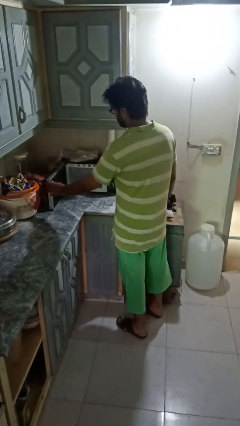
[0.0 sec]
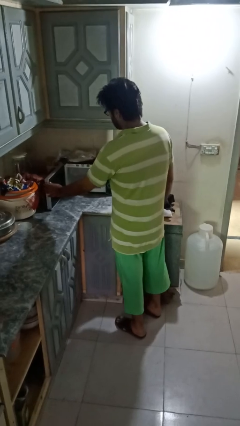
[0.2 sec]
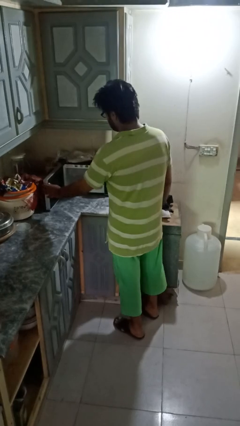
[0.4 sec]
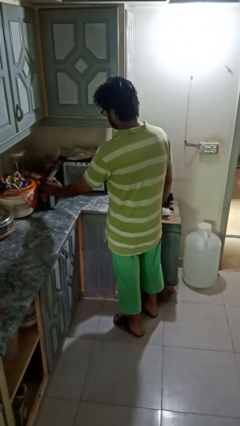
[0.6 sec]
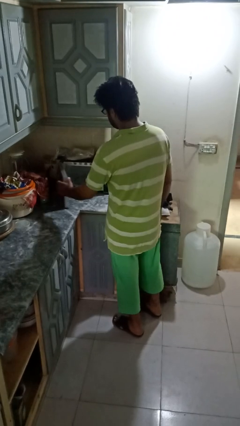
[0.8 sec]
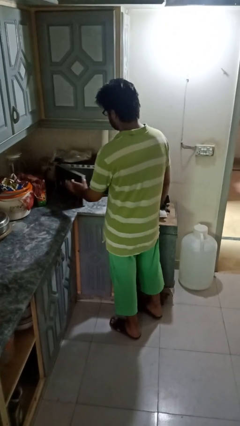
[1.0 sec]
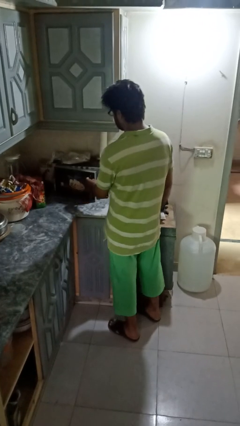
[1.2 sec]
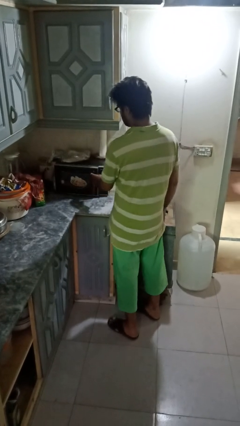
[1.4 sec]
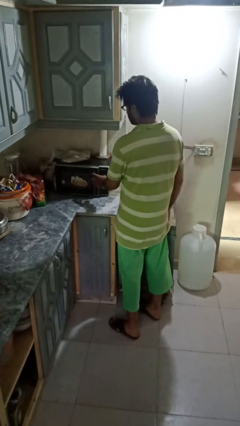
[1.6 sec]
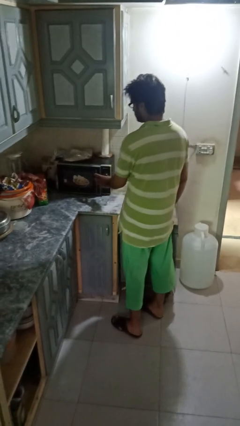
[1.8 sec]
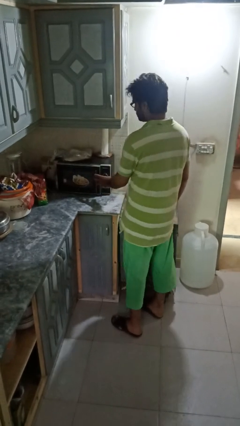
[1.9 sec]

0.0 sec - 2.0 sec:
person closes microwave

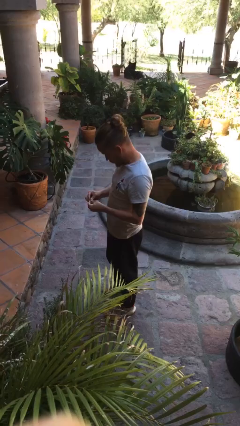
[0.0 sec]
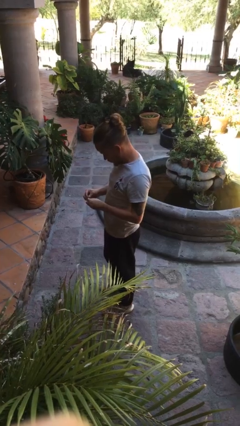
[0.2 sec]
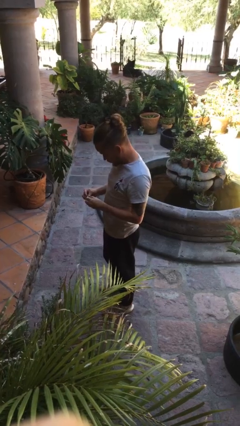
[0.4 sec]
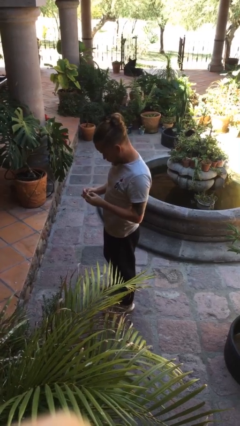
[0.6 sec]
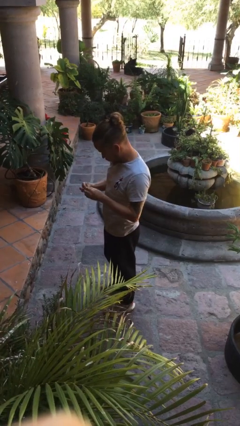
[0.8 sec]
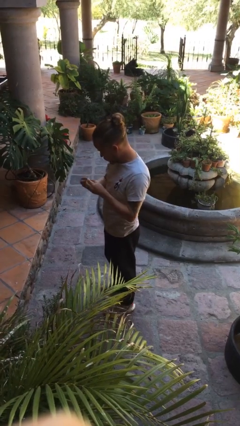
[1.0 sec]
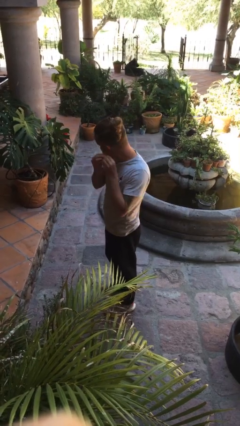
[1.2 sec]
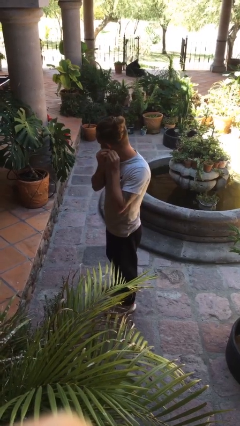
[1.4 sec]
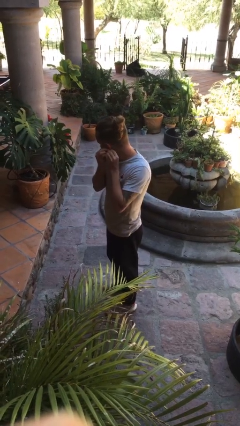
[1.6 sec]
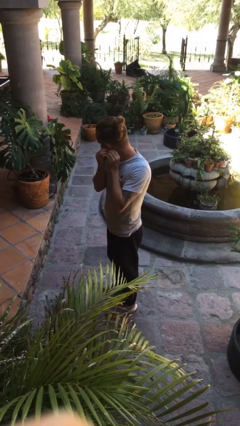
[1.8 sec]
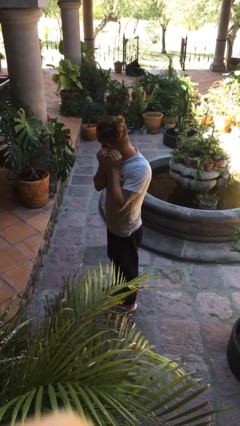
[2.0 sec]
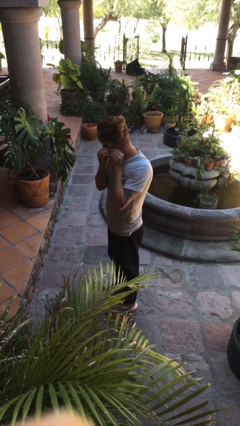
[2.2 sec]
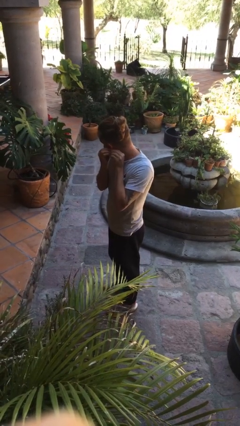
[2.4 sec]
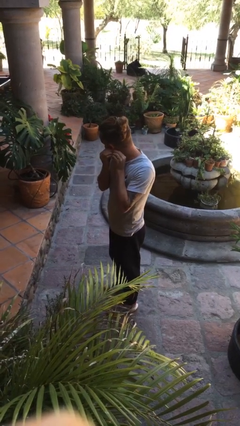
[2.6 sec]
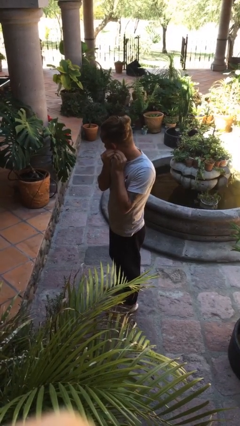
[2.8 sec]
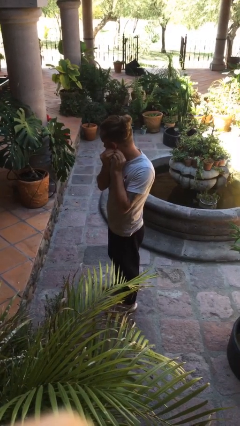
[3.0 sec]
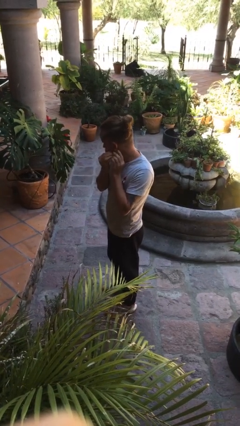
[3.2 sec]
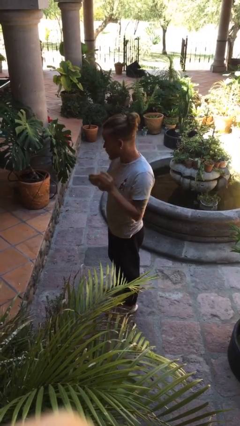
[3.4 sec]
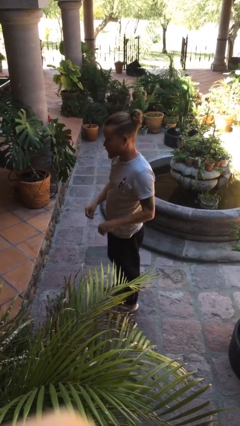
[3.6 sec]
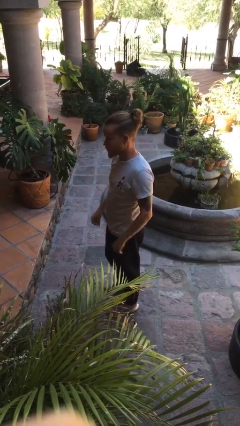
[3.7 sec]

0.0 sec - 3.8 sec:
person puts on earrings

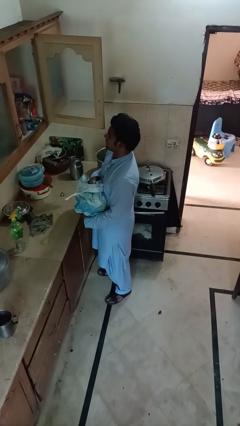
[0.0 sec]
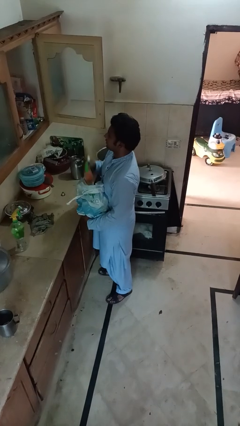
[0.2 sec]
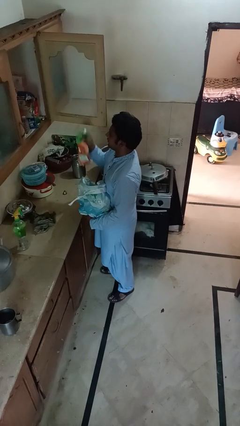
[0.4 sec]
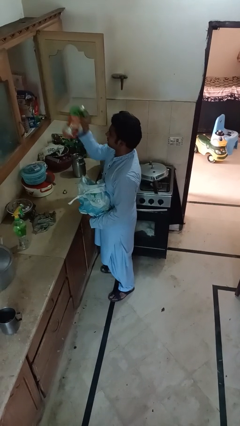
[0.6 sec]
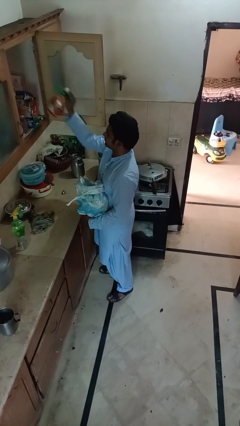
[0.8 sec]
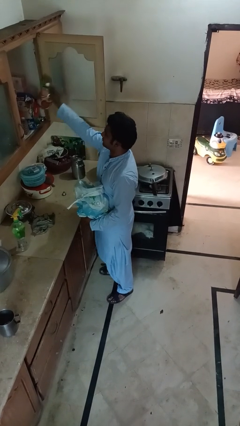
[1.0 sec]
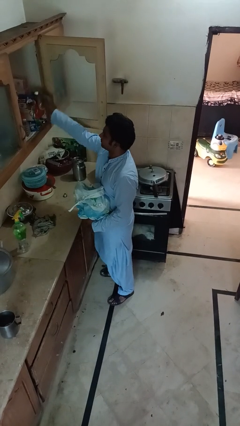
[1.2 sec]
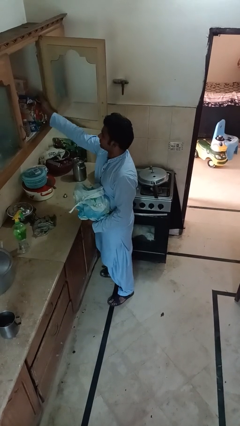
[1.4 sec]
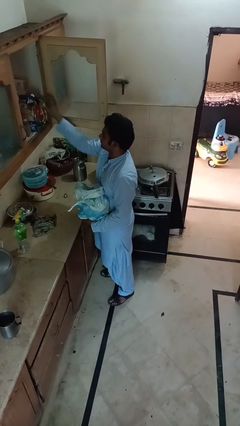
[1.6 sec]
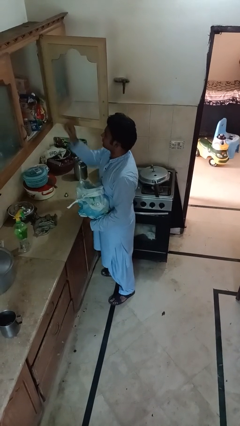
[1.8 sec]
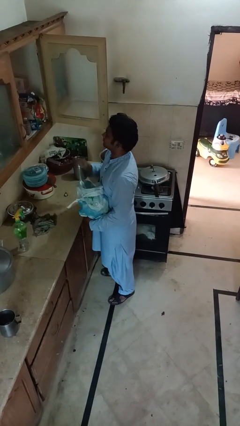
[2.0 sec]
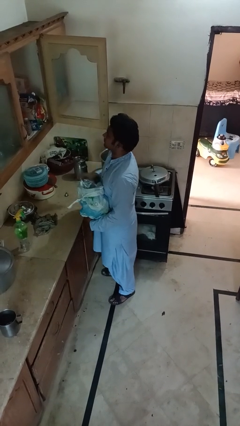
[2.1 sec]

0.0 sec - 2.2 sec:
person loads groceries into cabinet

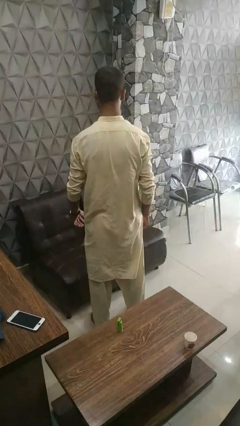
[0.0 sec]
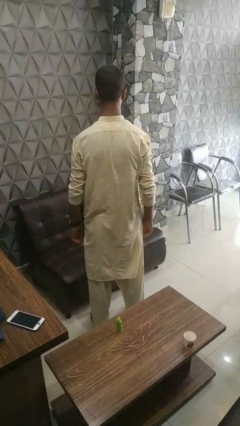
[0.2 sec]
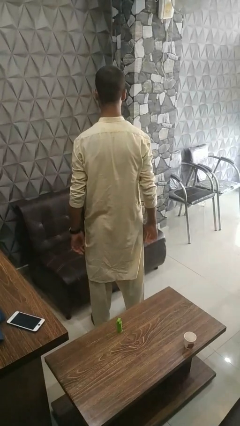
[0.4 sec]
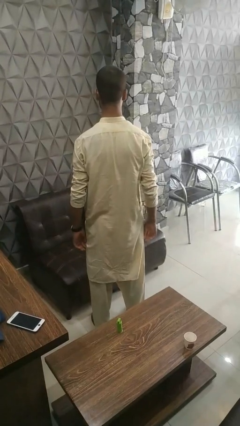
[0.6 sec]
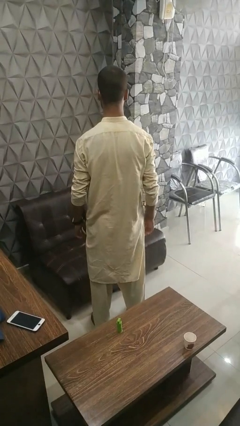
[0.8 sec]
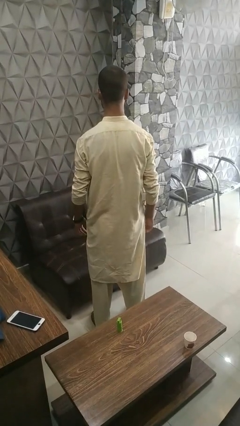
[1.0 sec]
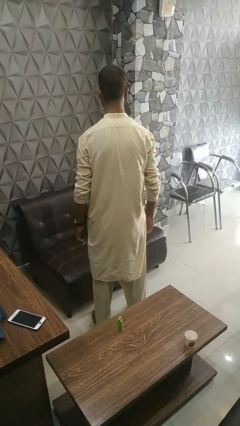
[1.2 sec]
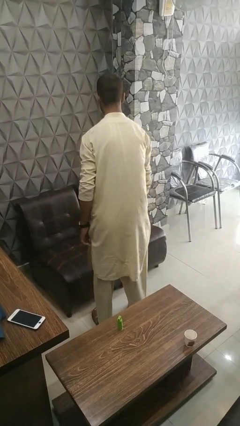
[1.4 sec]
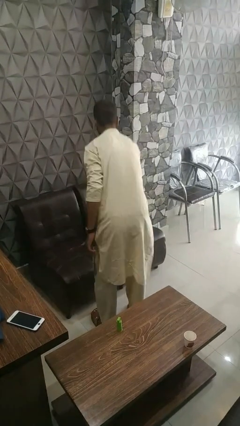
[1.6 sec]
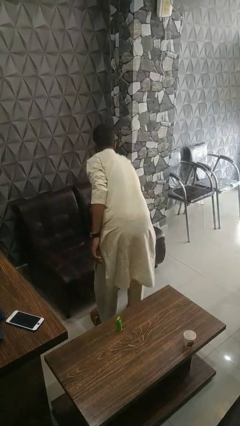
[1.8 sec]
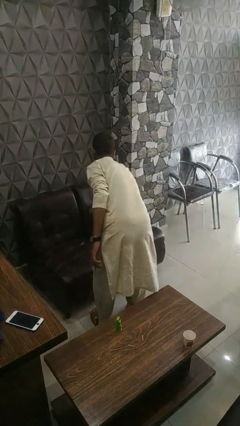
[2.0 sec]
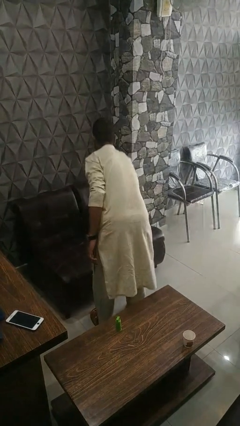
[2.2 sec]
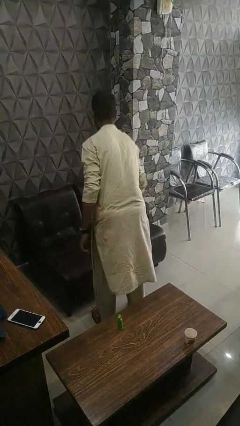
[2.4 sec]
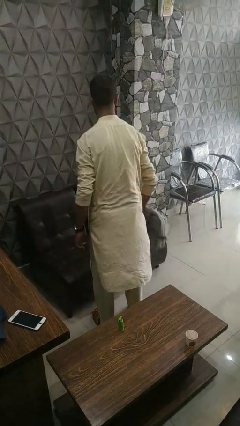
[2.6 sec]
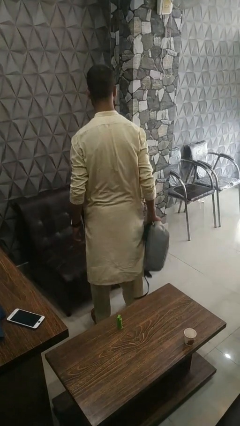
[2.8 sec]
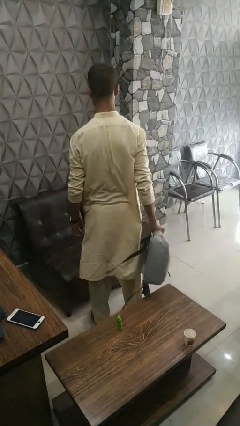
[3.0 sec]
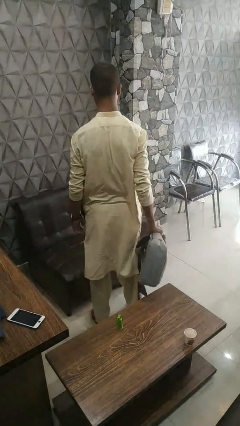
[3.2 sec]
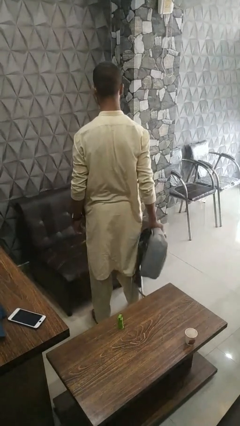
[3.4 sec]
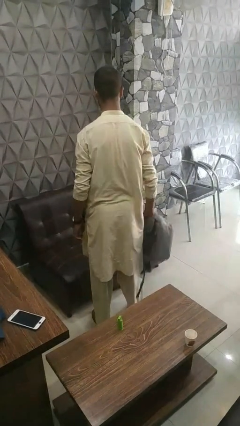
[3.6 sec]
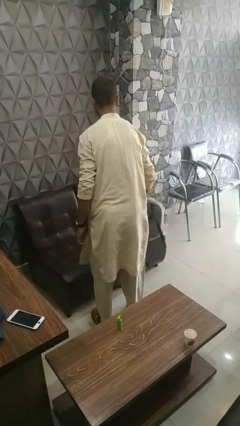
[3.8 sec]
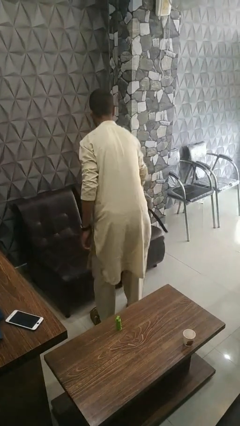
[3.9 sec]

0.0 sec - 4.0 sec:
person searches in couch

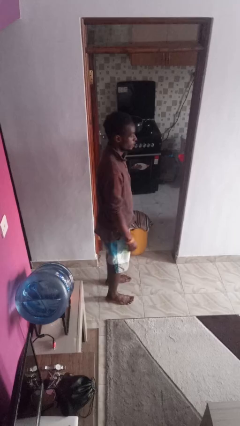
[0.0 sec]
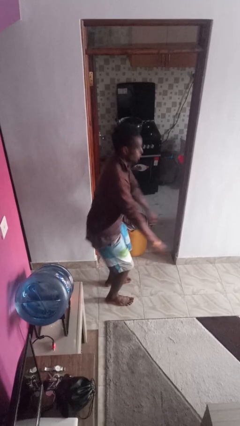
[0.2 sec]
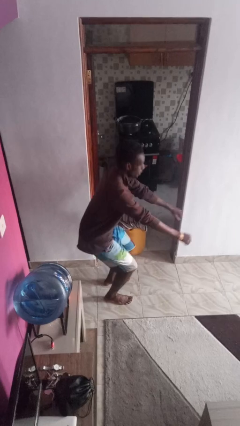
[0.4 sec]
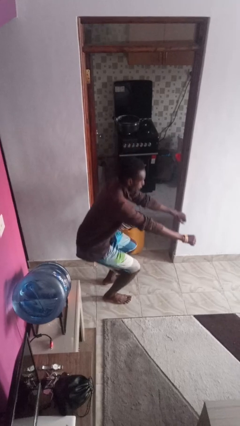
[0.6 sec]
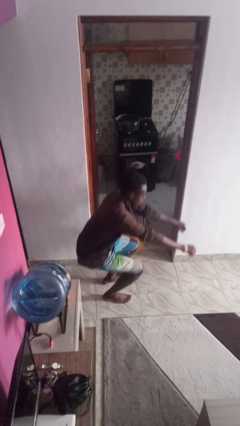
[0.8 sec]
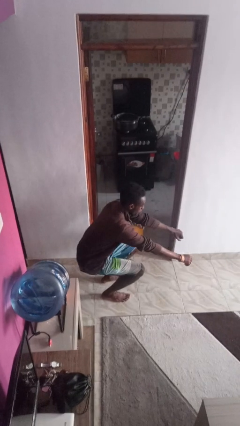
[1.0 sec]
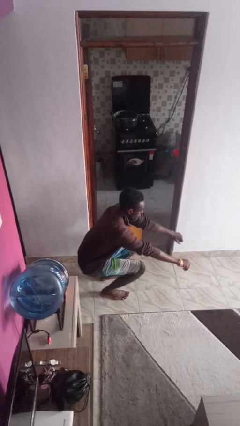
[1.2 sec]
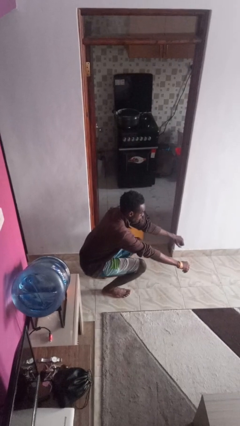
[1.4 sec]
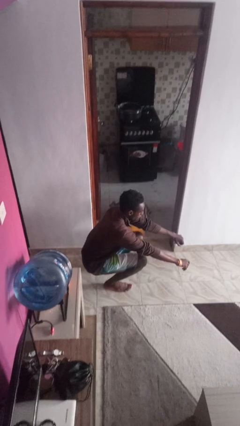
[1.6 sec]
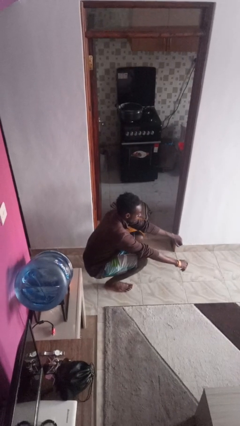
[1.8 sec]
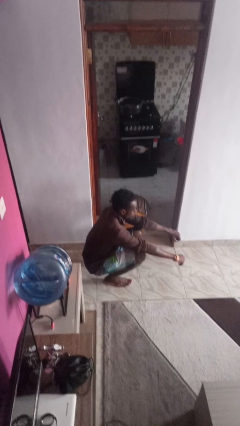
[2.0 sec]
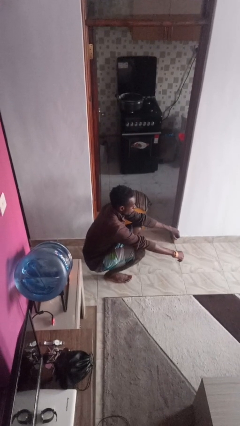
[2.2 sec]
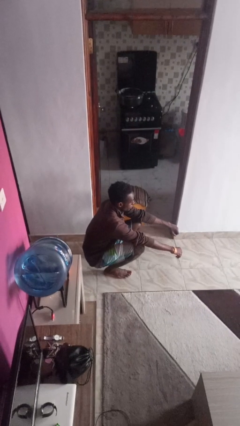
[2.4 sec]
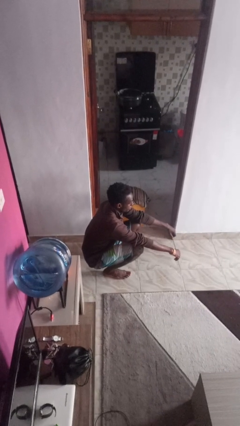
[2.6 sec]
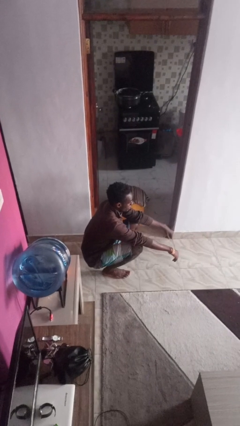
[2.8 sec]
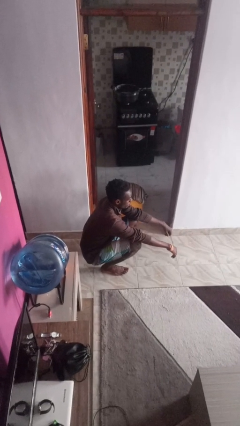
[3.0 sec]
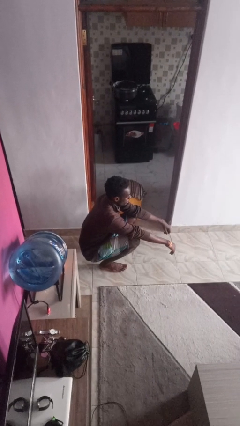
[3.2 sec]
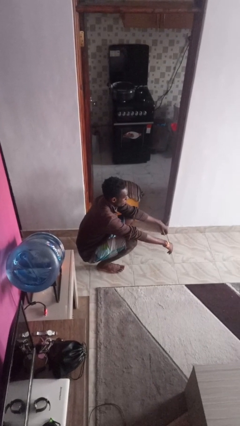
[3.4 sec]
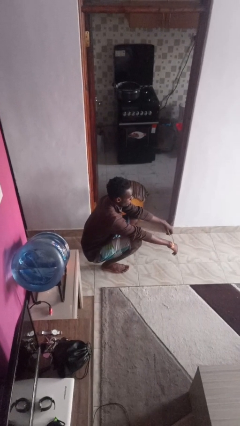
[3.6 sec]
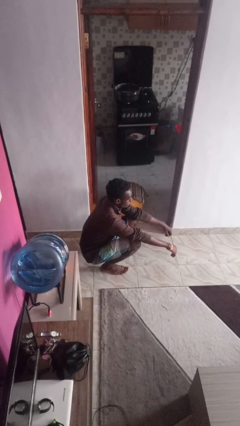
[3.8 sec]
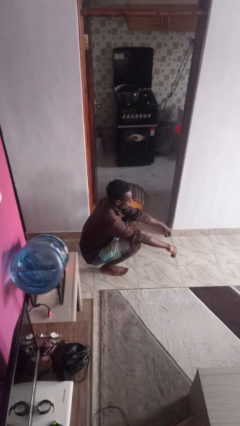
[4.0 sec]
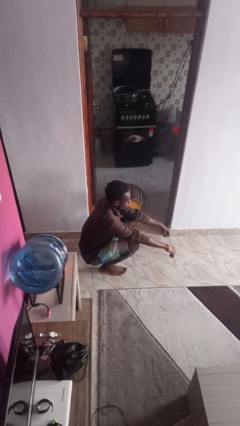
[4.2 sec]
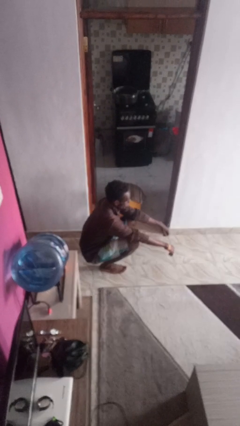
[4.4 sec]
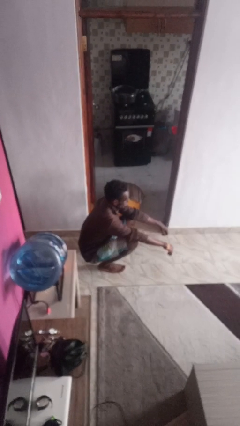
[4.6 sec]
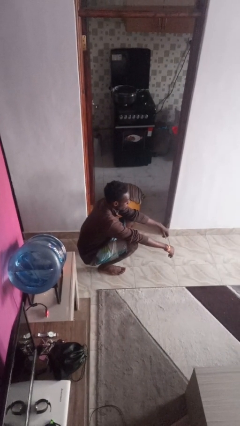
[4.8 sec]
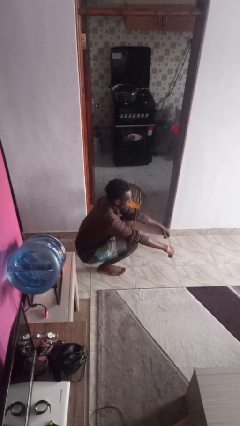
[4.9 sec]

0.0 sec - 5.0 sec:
person squats

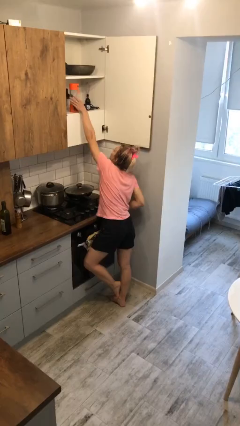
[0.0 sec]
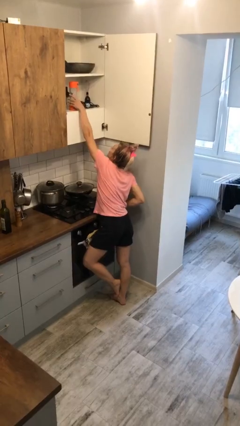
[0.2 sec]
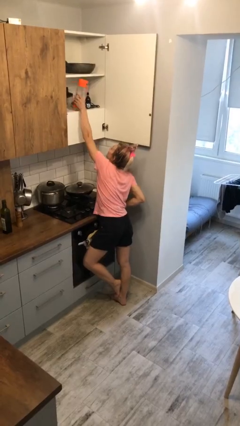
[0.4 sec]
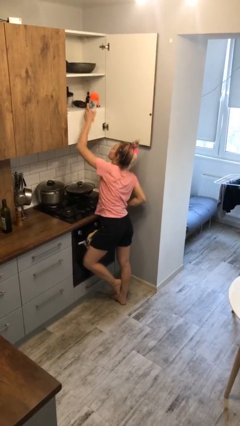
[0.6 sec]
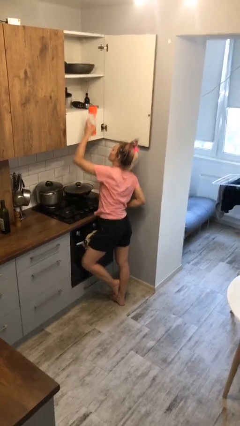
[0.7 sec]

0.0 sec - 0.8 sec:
person picks up object from cabinet
